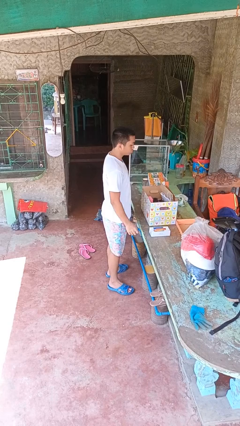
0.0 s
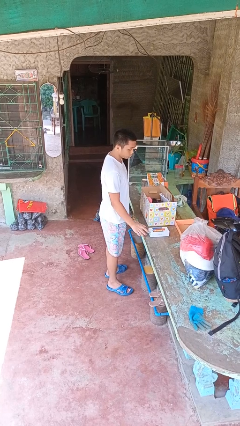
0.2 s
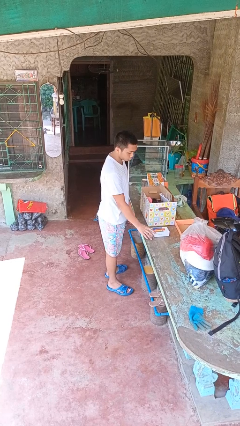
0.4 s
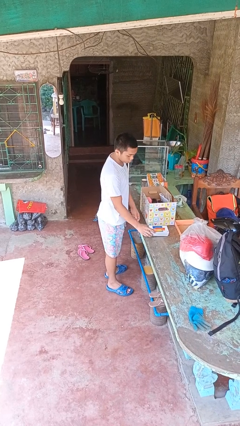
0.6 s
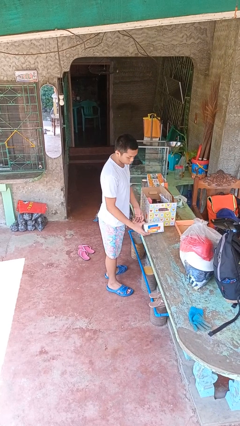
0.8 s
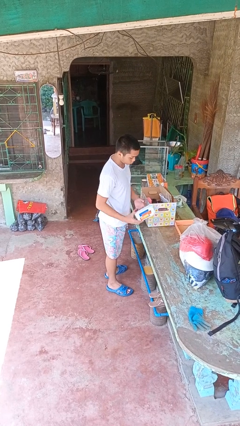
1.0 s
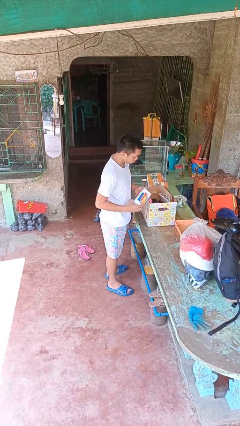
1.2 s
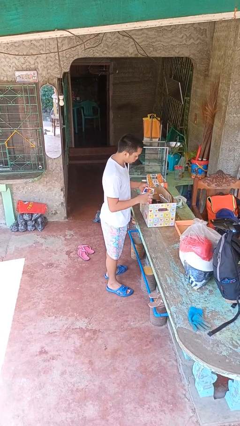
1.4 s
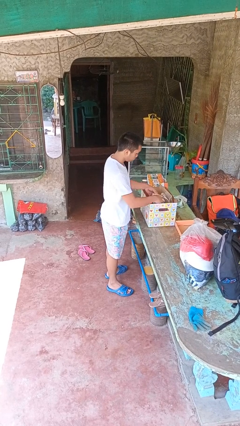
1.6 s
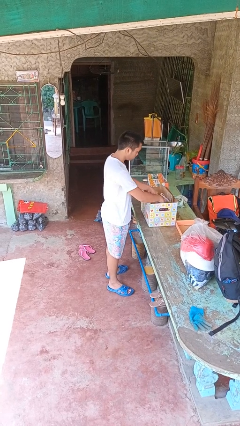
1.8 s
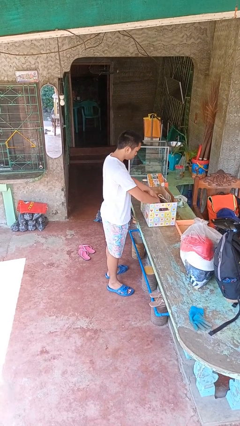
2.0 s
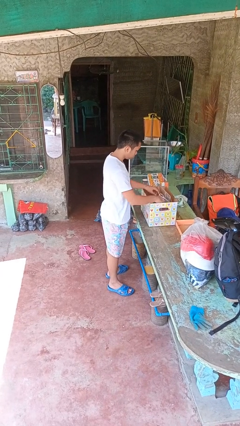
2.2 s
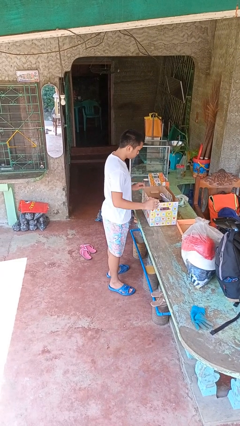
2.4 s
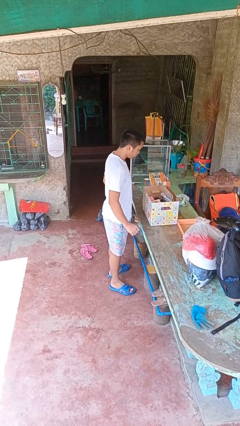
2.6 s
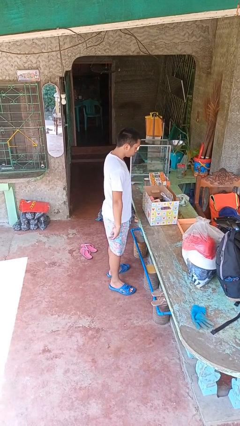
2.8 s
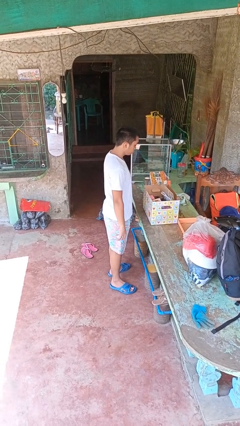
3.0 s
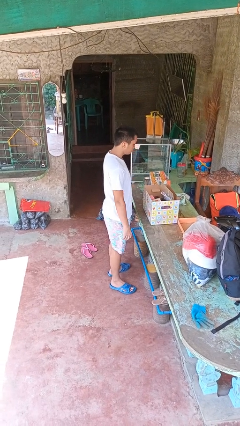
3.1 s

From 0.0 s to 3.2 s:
person puts object into box

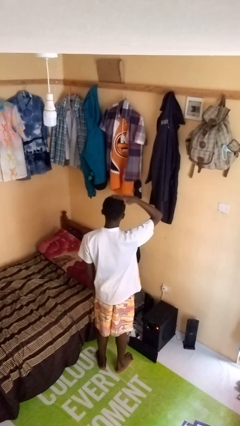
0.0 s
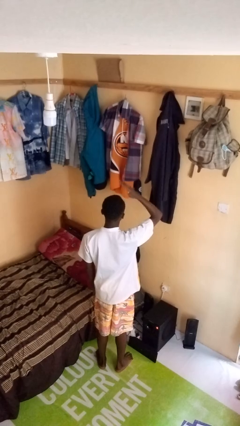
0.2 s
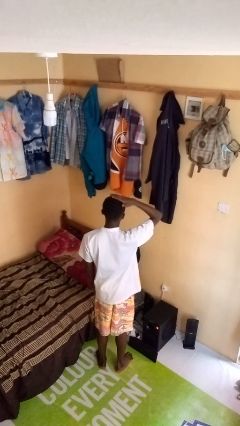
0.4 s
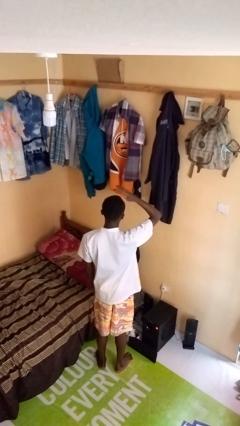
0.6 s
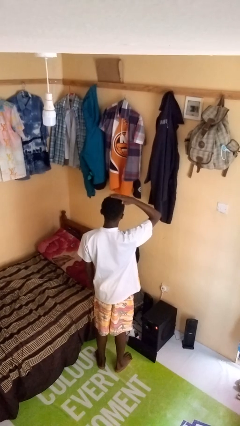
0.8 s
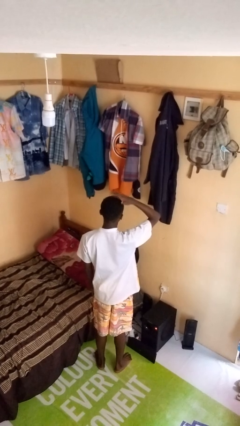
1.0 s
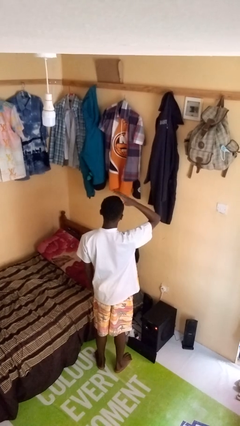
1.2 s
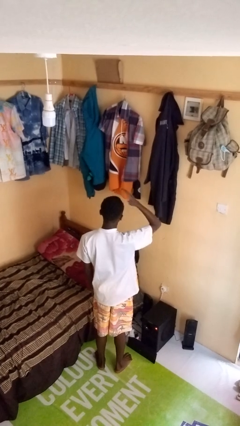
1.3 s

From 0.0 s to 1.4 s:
person pats head

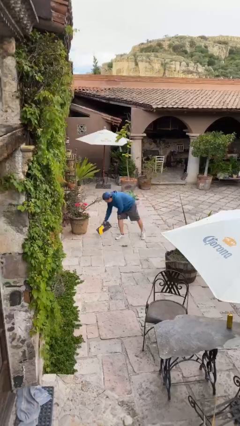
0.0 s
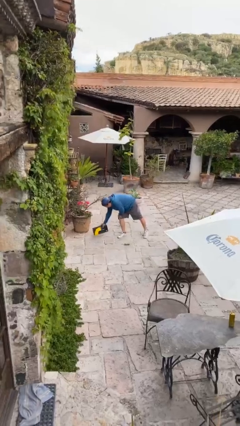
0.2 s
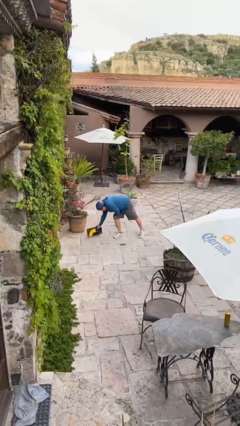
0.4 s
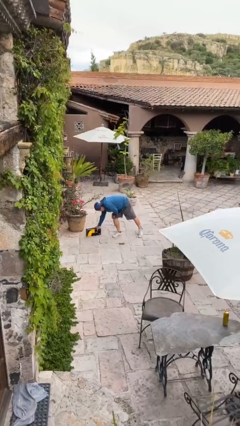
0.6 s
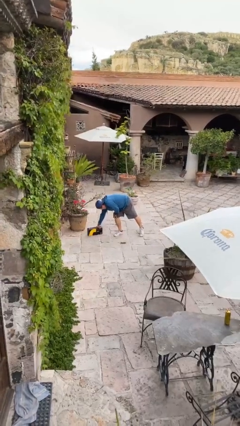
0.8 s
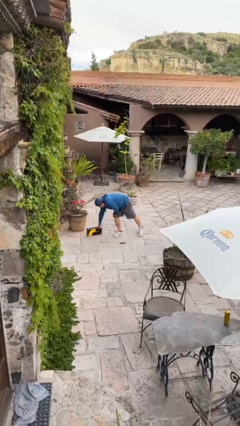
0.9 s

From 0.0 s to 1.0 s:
person puts down object on floor

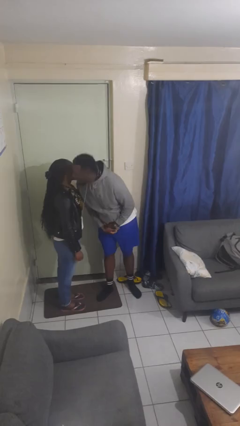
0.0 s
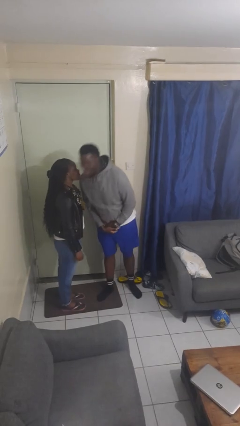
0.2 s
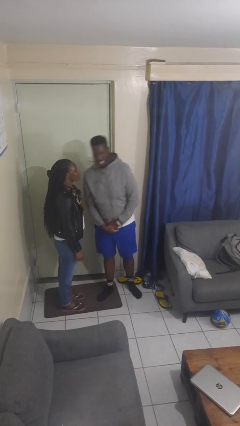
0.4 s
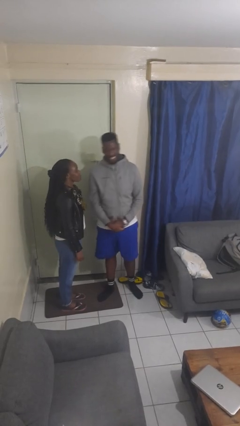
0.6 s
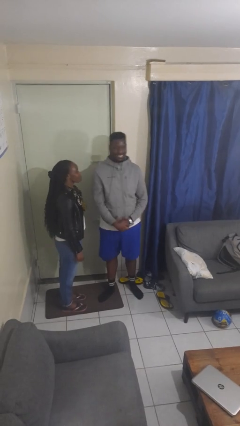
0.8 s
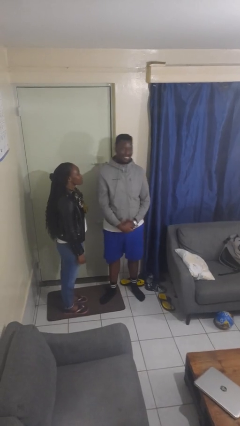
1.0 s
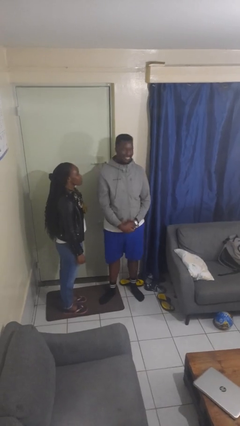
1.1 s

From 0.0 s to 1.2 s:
person kisses cheek of person

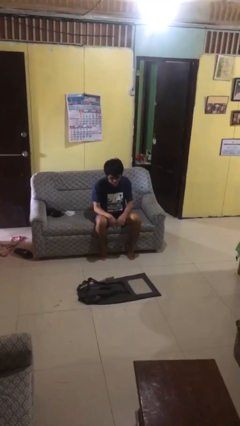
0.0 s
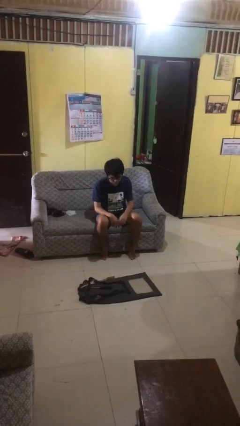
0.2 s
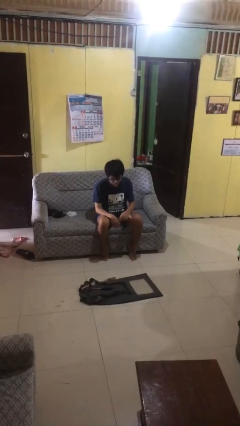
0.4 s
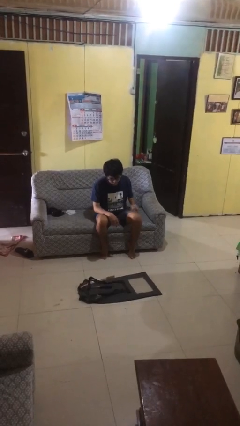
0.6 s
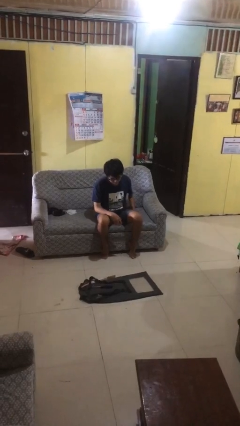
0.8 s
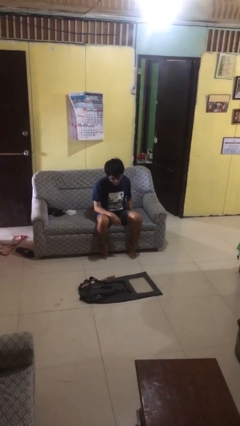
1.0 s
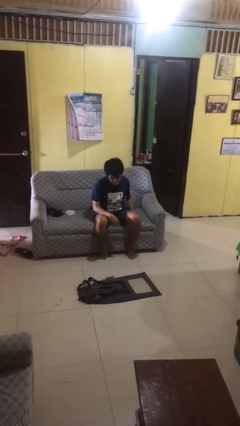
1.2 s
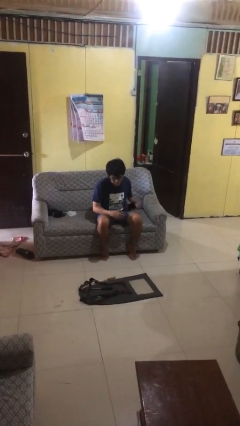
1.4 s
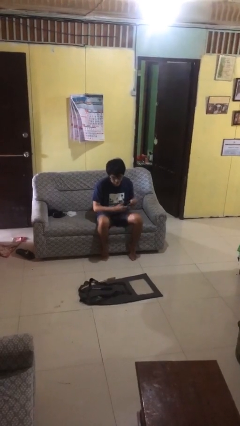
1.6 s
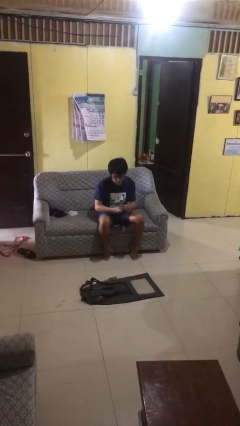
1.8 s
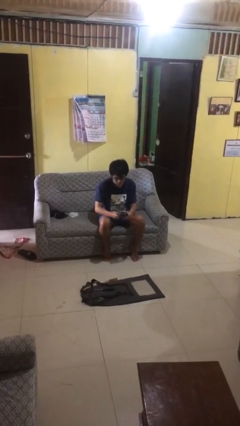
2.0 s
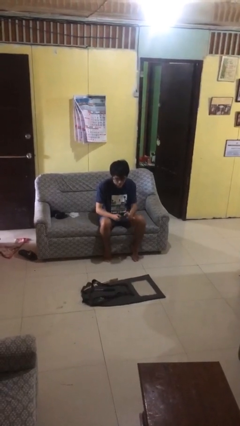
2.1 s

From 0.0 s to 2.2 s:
person takes phone from pocket

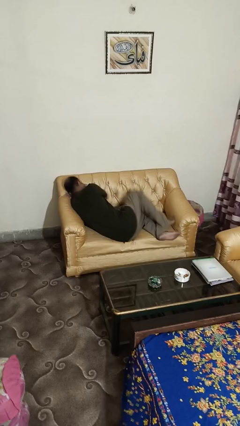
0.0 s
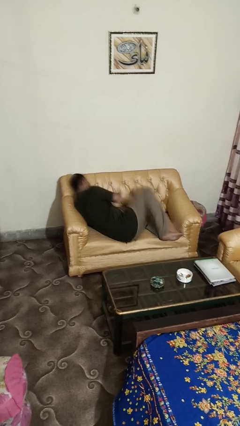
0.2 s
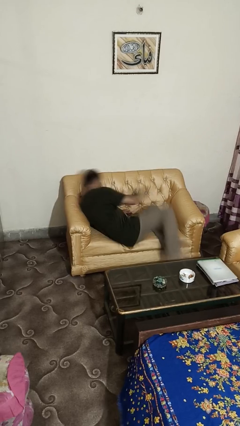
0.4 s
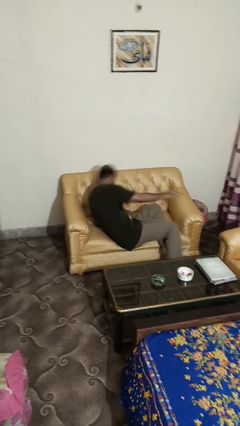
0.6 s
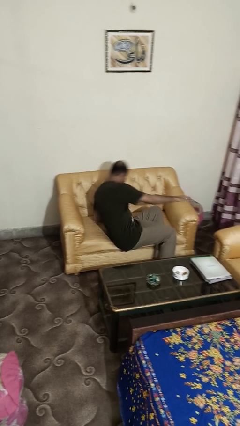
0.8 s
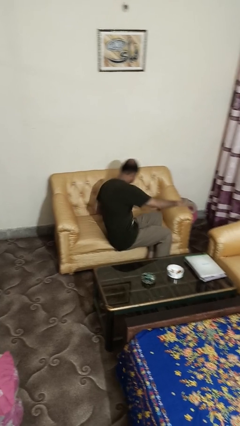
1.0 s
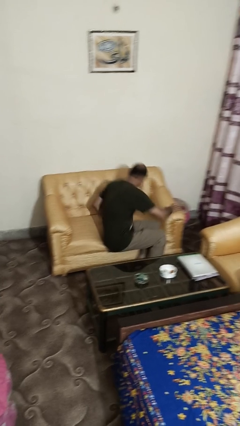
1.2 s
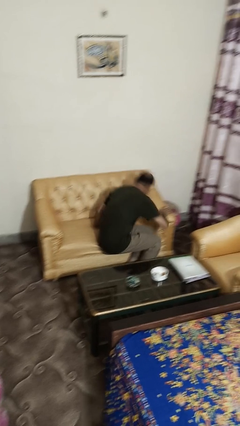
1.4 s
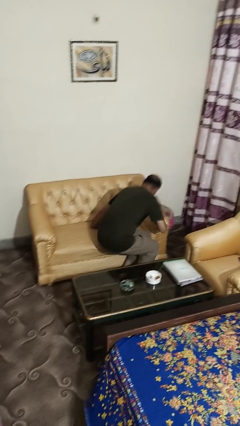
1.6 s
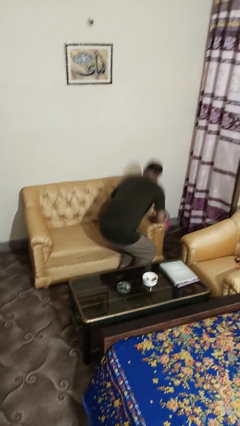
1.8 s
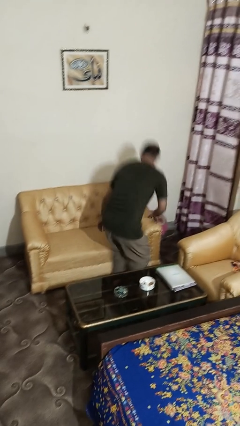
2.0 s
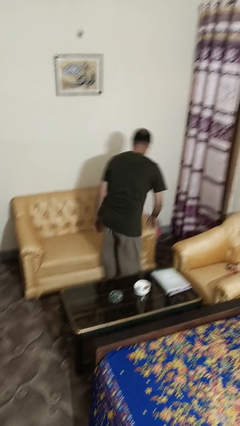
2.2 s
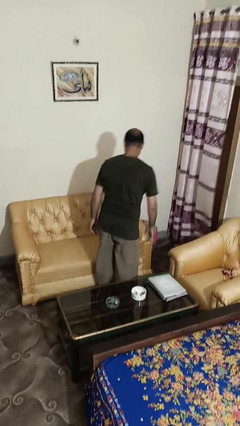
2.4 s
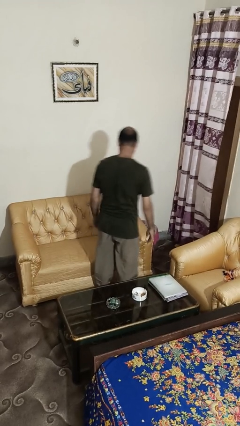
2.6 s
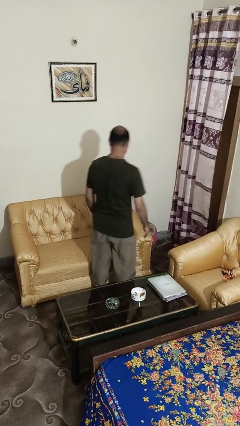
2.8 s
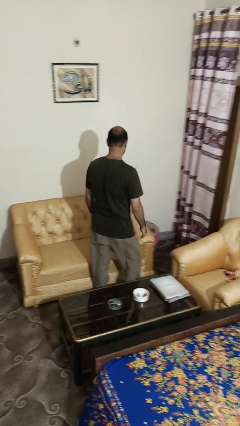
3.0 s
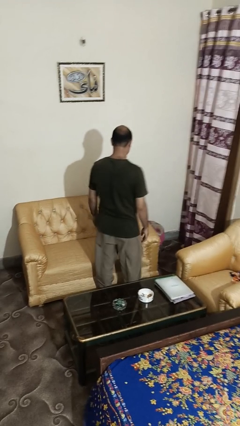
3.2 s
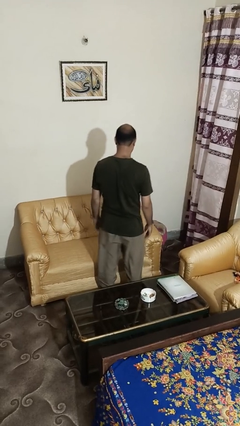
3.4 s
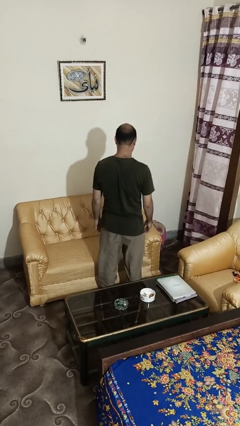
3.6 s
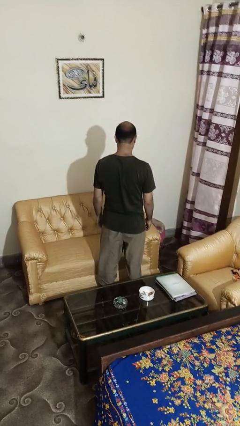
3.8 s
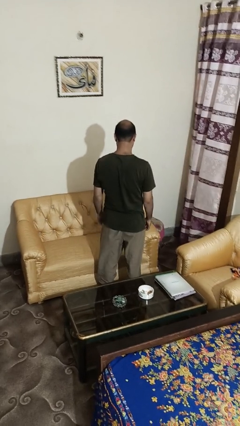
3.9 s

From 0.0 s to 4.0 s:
person stands up

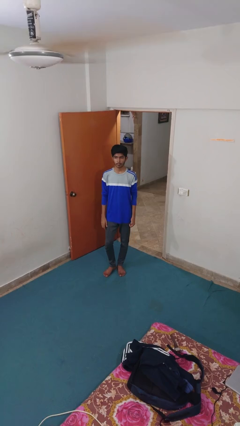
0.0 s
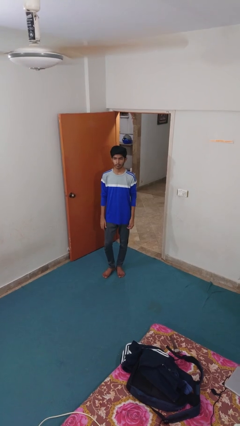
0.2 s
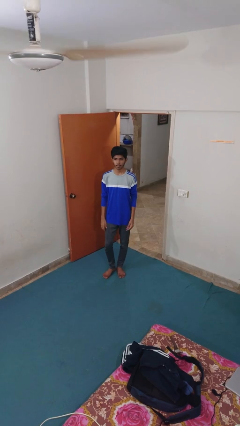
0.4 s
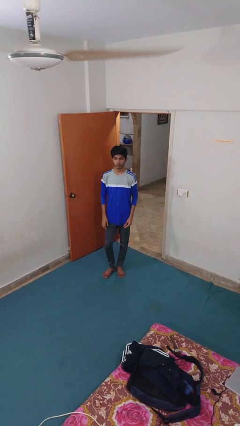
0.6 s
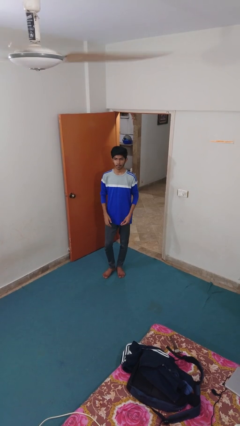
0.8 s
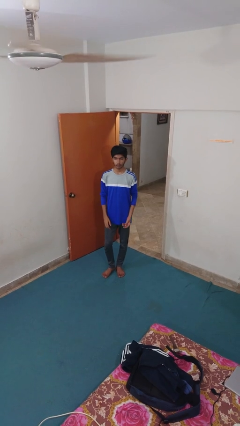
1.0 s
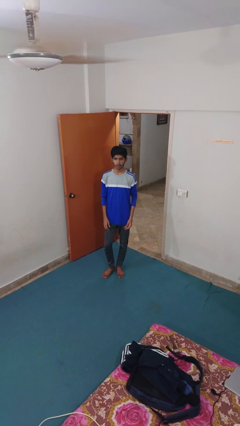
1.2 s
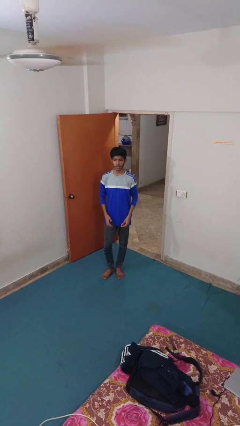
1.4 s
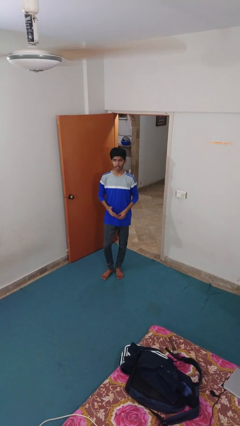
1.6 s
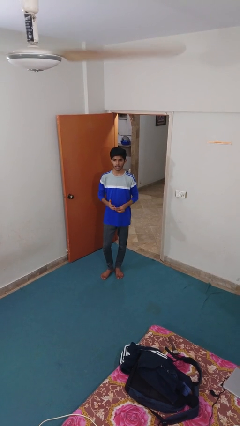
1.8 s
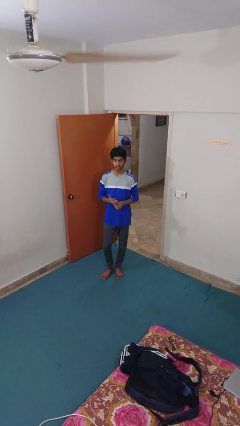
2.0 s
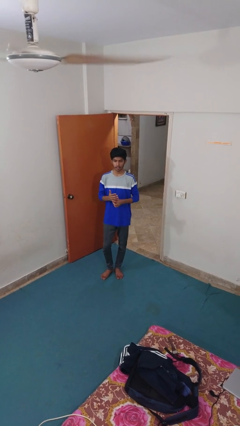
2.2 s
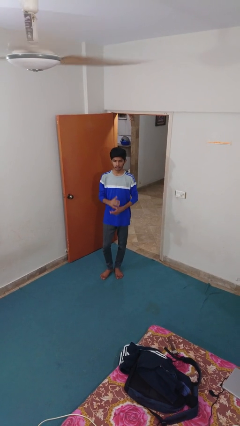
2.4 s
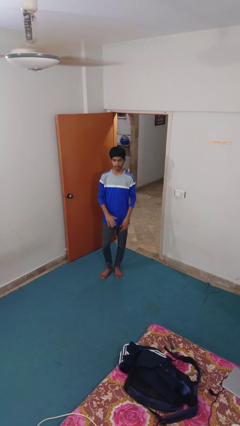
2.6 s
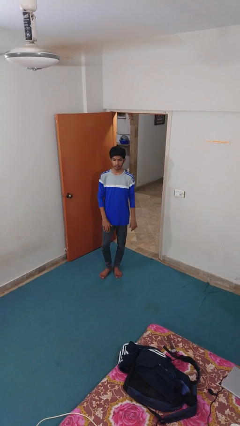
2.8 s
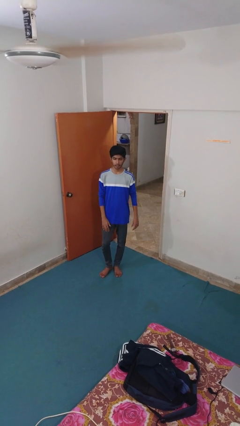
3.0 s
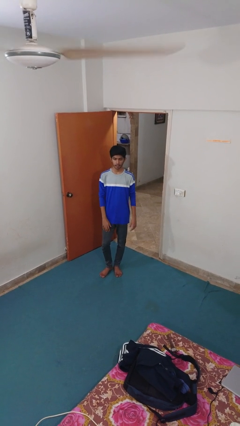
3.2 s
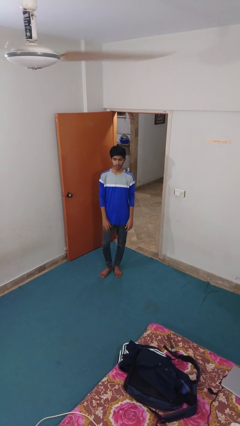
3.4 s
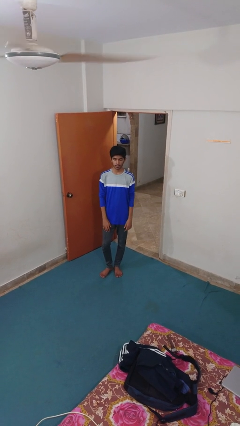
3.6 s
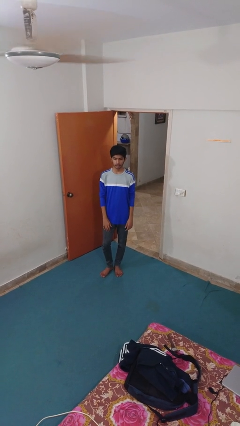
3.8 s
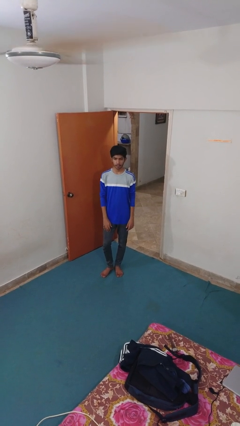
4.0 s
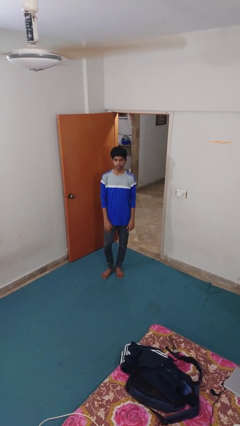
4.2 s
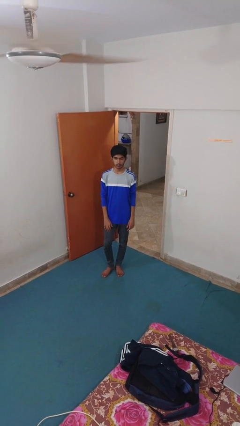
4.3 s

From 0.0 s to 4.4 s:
person puts on ring
